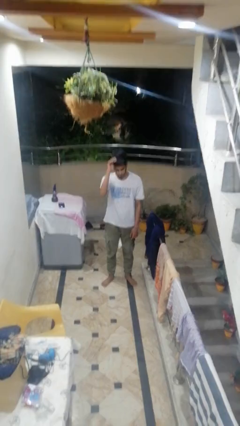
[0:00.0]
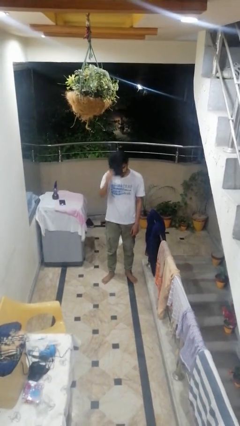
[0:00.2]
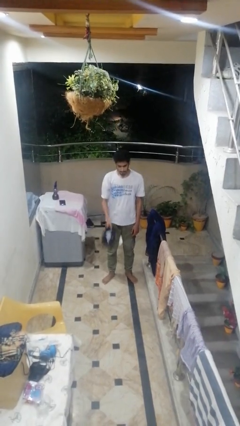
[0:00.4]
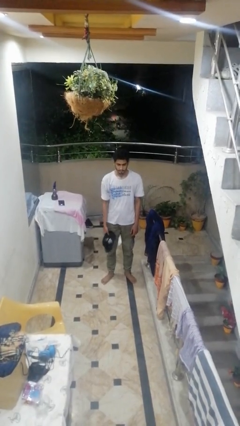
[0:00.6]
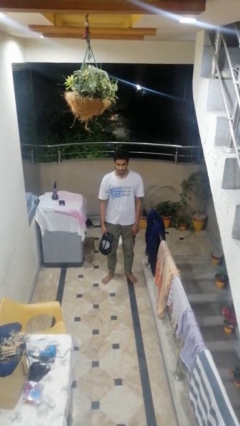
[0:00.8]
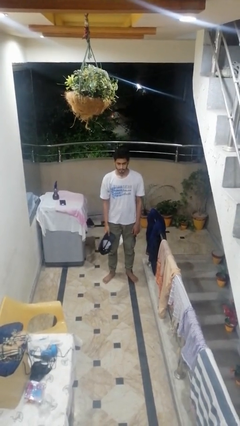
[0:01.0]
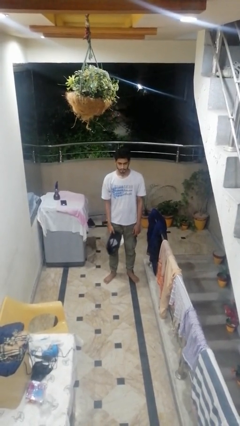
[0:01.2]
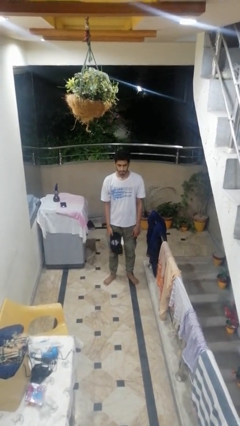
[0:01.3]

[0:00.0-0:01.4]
person takes off hat

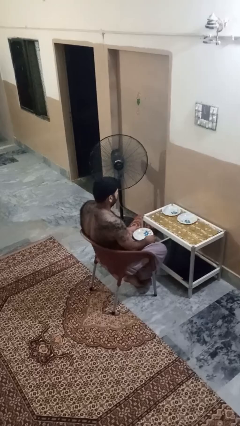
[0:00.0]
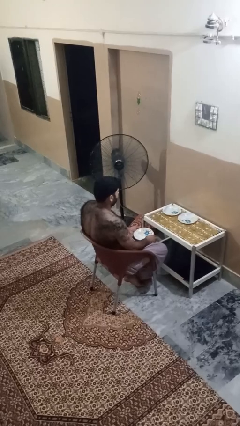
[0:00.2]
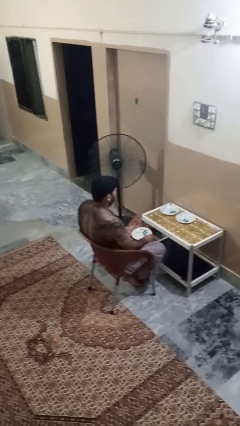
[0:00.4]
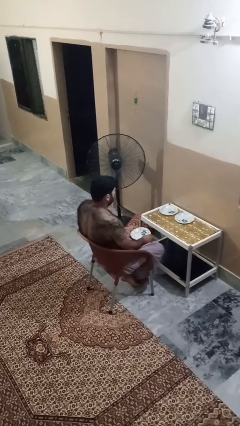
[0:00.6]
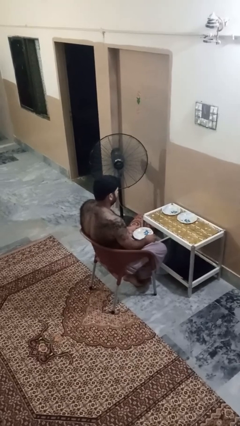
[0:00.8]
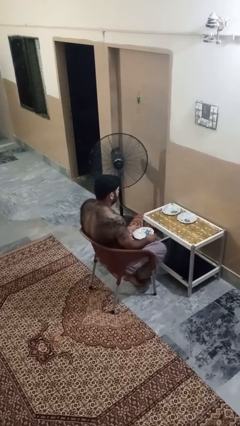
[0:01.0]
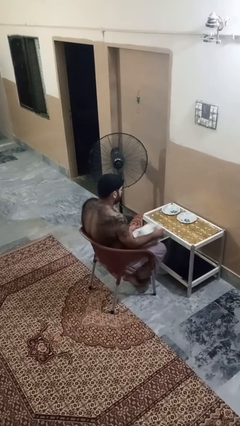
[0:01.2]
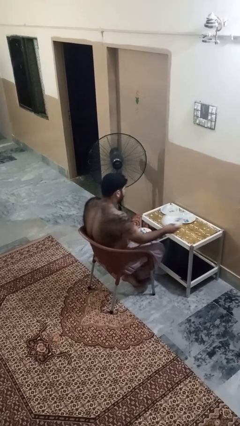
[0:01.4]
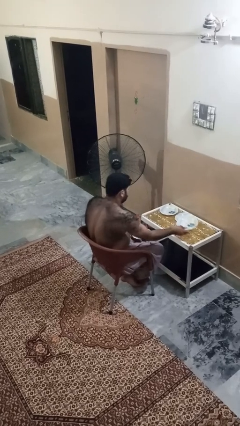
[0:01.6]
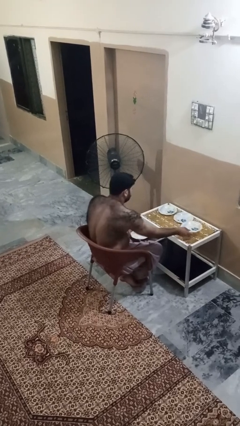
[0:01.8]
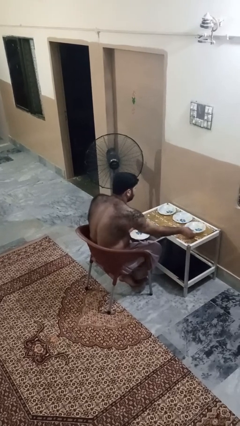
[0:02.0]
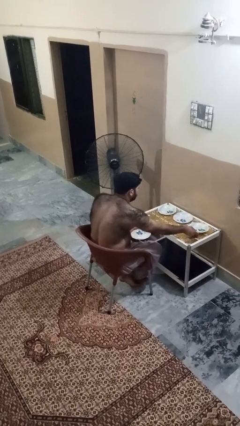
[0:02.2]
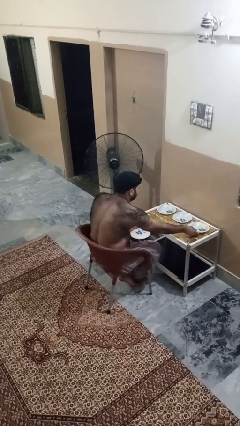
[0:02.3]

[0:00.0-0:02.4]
person sets table

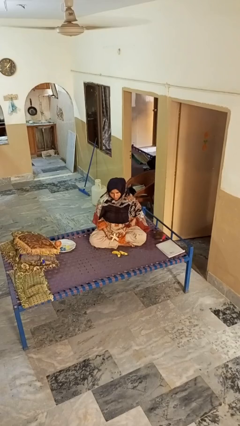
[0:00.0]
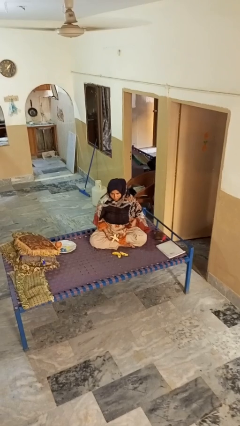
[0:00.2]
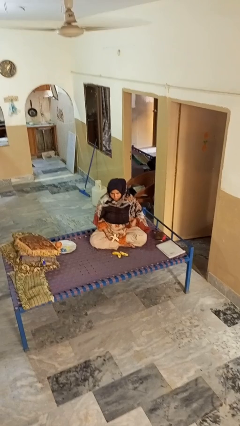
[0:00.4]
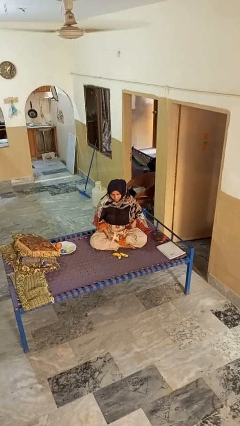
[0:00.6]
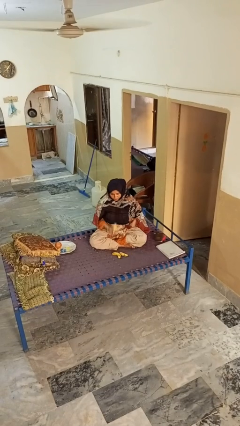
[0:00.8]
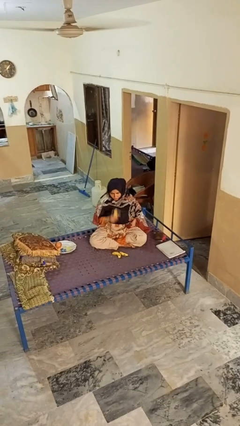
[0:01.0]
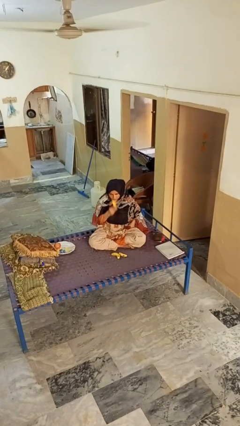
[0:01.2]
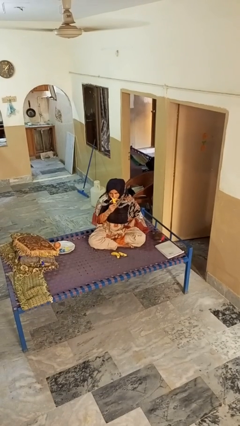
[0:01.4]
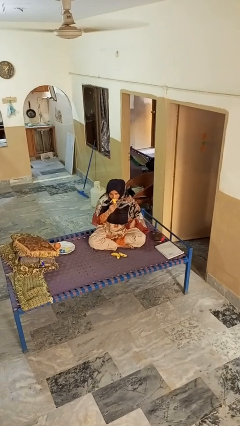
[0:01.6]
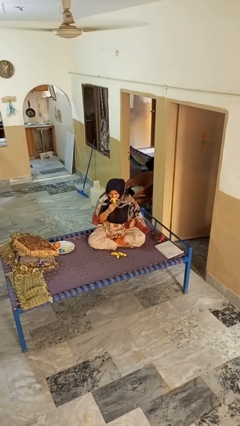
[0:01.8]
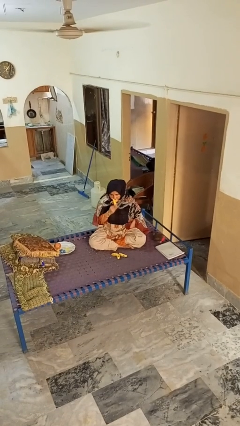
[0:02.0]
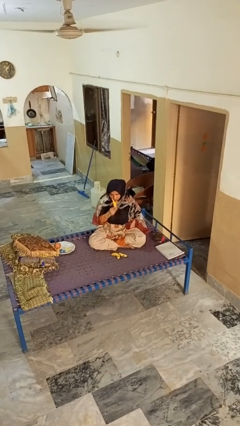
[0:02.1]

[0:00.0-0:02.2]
person eats banana

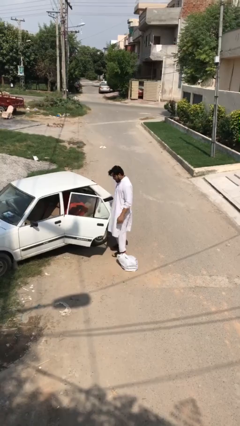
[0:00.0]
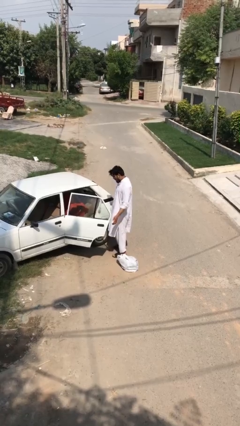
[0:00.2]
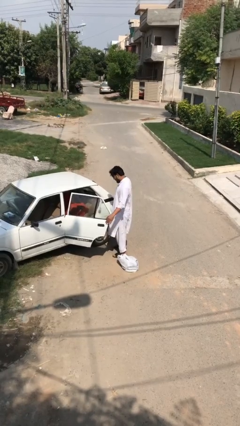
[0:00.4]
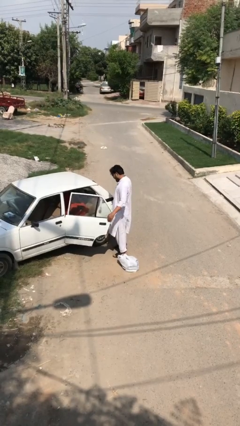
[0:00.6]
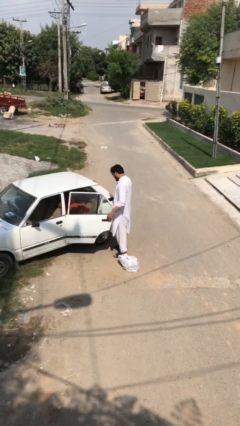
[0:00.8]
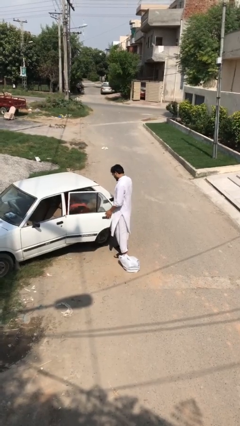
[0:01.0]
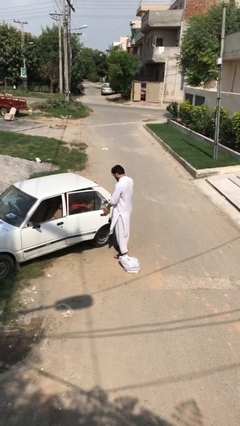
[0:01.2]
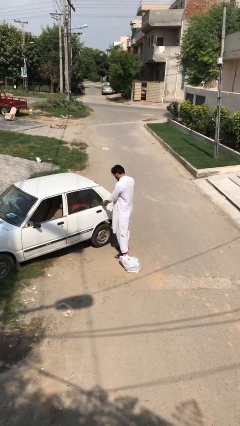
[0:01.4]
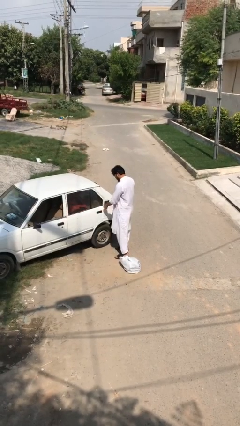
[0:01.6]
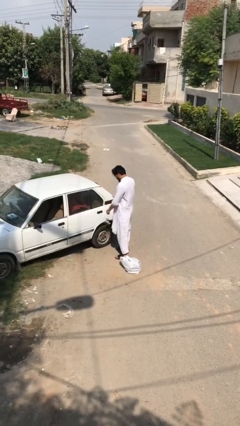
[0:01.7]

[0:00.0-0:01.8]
person closes car door

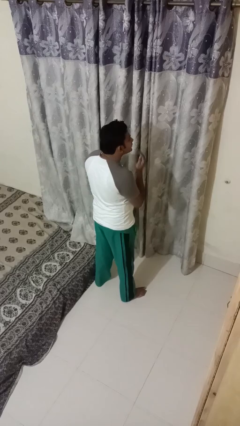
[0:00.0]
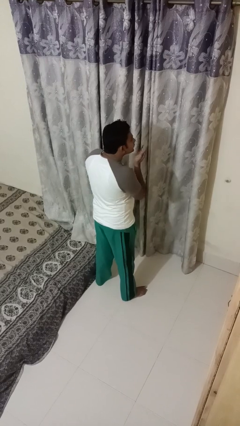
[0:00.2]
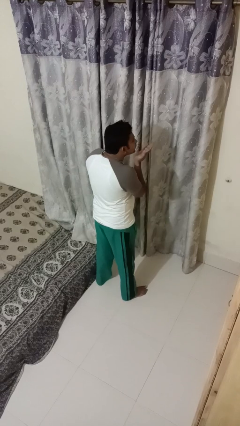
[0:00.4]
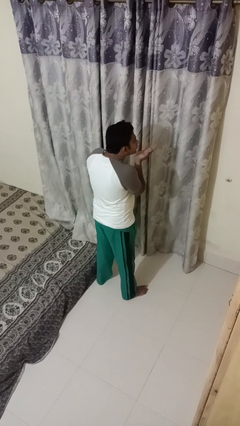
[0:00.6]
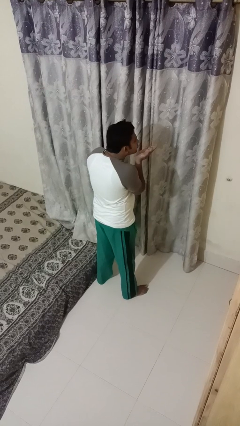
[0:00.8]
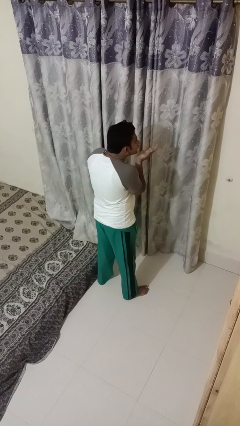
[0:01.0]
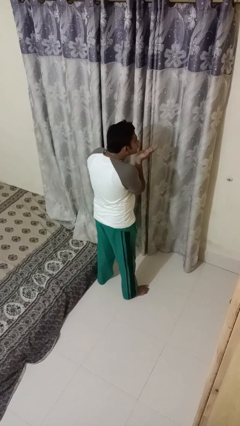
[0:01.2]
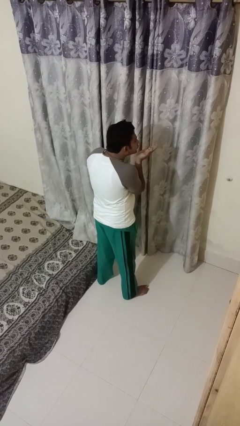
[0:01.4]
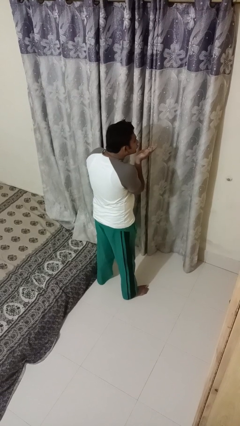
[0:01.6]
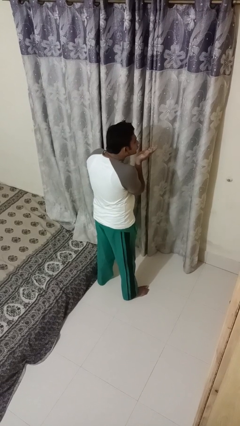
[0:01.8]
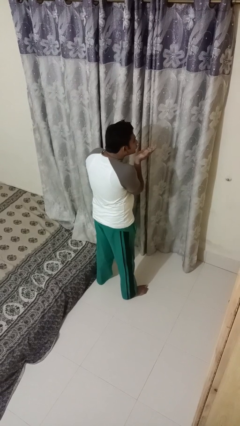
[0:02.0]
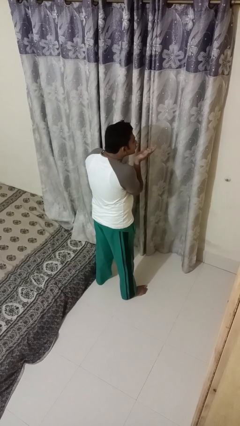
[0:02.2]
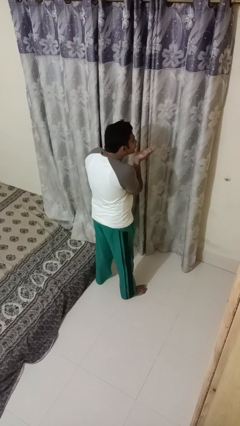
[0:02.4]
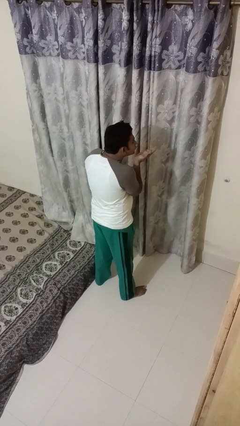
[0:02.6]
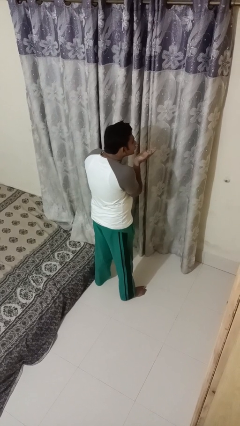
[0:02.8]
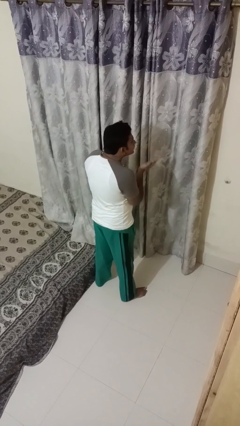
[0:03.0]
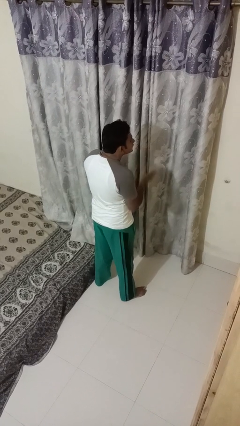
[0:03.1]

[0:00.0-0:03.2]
person gestures blow kiss

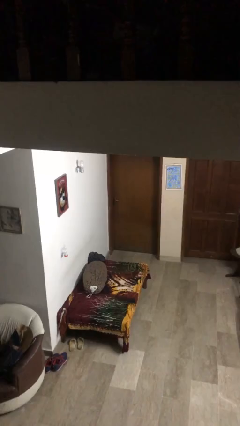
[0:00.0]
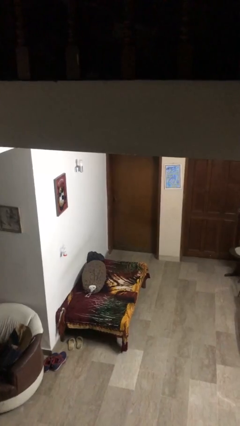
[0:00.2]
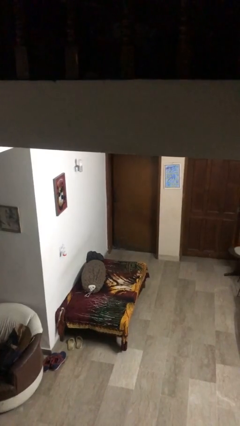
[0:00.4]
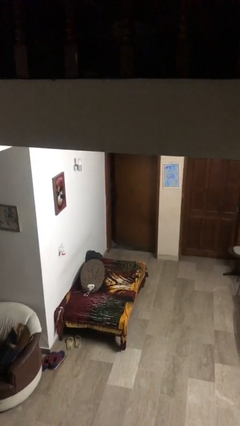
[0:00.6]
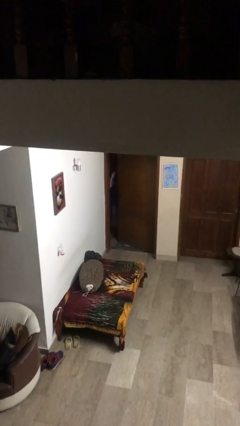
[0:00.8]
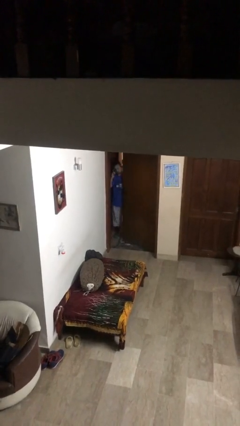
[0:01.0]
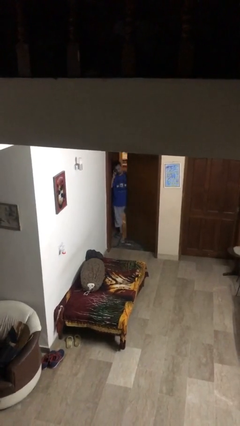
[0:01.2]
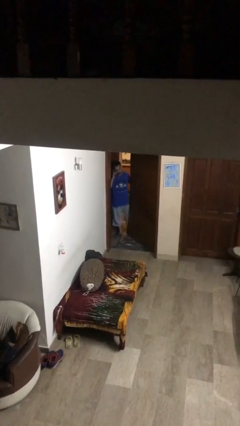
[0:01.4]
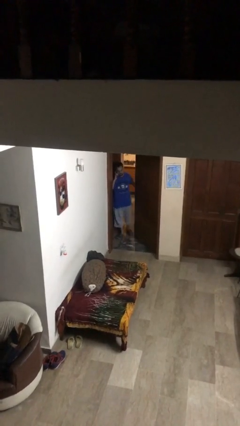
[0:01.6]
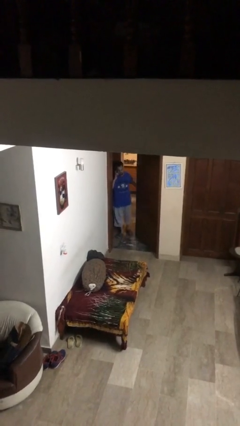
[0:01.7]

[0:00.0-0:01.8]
person opens facility door

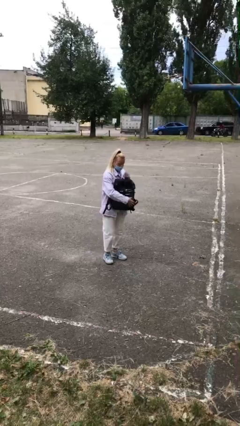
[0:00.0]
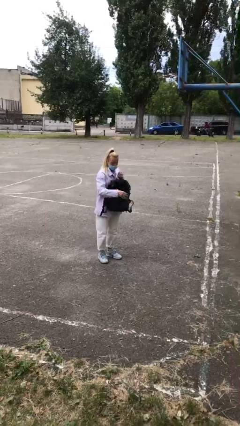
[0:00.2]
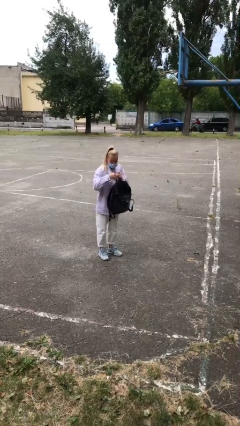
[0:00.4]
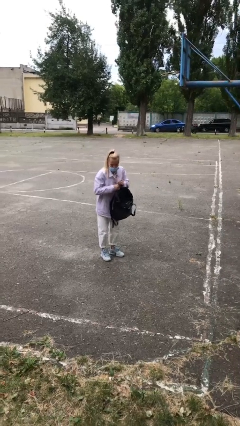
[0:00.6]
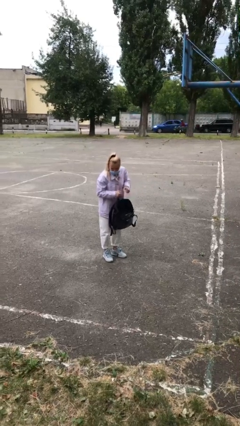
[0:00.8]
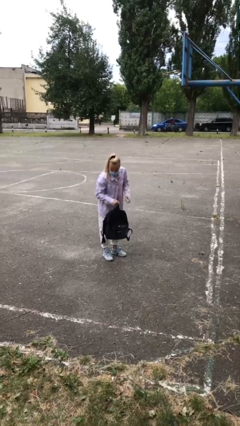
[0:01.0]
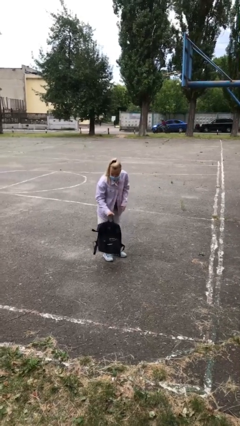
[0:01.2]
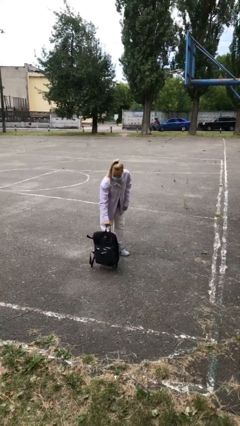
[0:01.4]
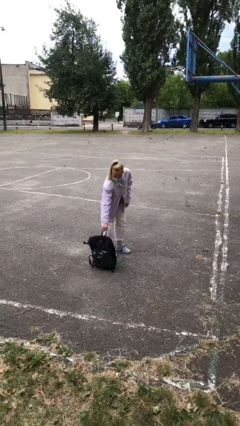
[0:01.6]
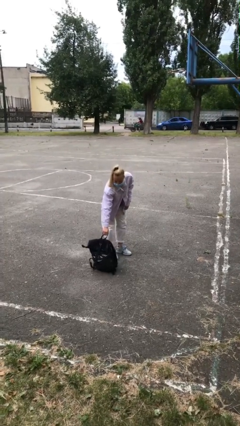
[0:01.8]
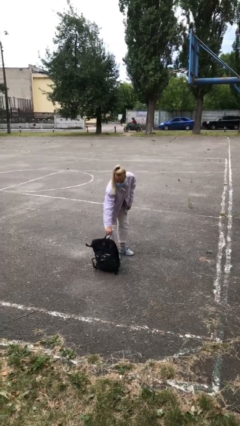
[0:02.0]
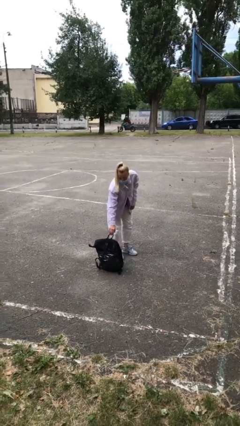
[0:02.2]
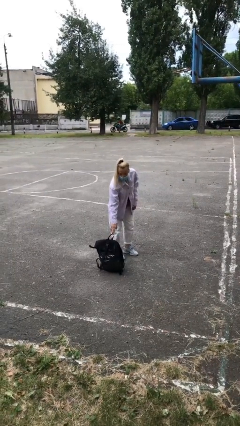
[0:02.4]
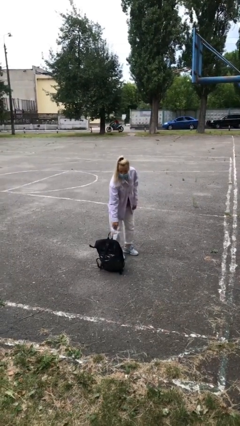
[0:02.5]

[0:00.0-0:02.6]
person puts down object on floor

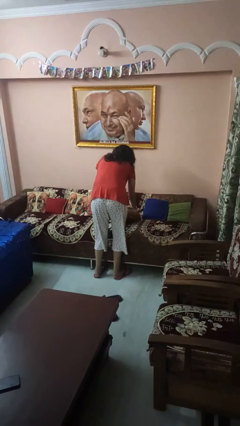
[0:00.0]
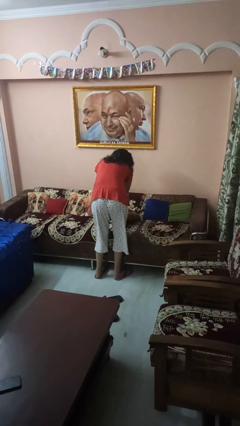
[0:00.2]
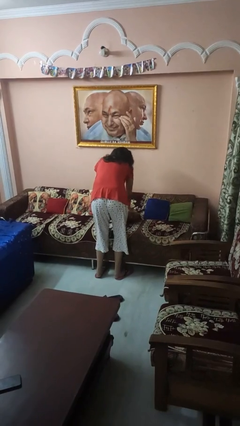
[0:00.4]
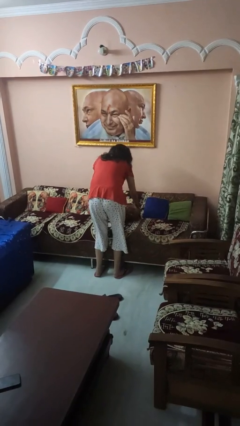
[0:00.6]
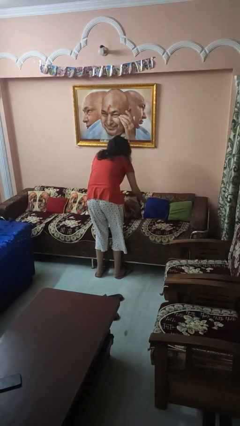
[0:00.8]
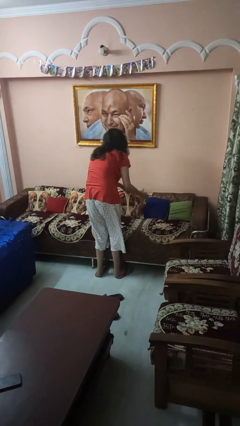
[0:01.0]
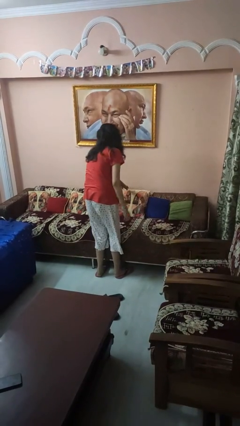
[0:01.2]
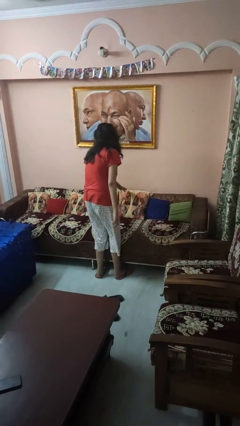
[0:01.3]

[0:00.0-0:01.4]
person searches in couch

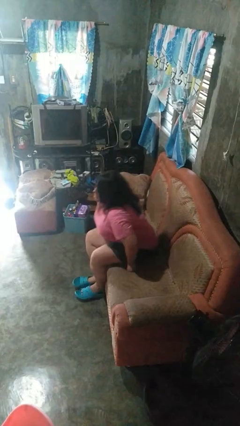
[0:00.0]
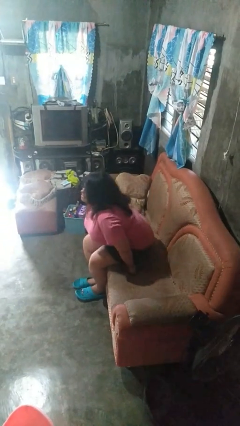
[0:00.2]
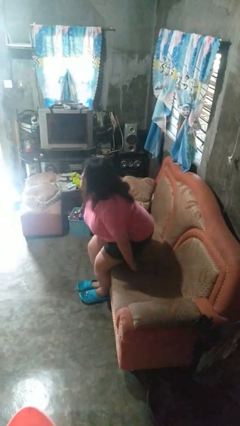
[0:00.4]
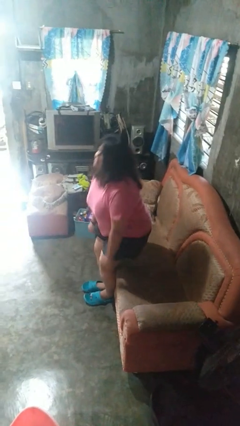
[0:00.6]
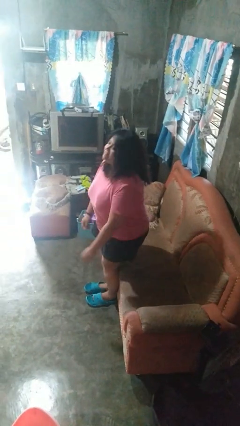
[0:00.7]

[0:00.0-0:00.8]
person stands up
